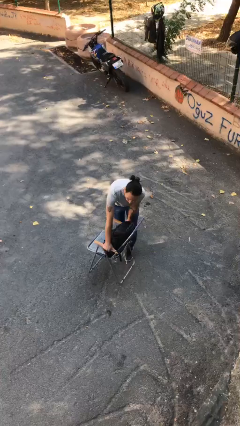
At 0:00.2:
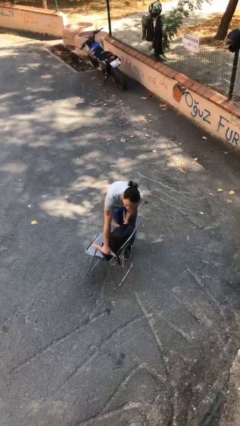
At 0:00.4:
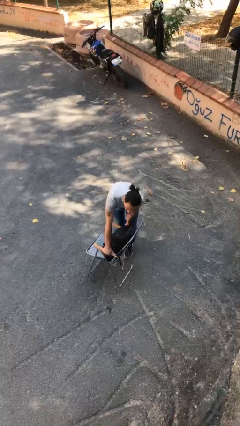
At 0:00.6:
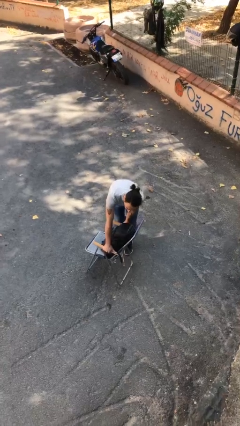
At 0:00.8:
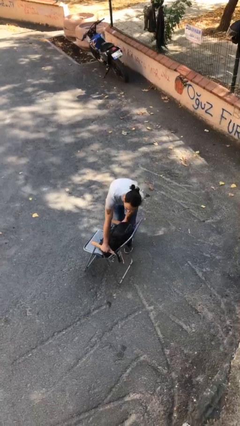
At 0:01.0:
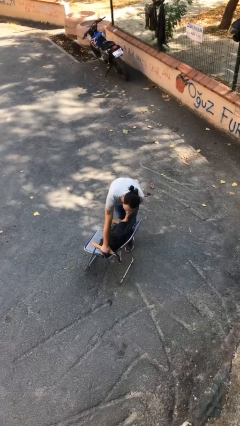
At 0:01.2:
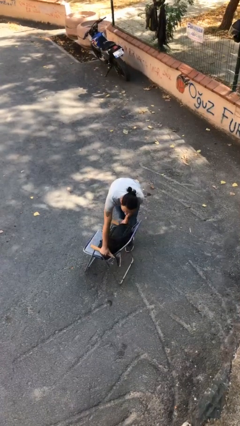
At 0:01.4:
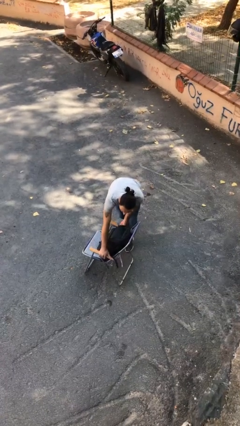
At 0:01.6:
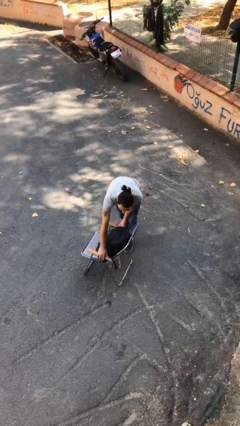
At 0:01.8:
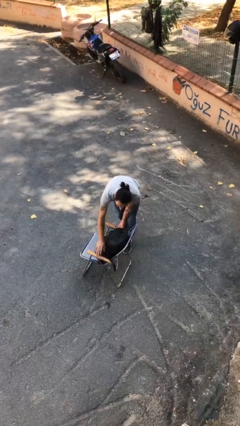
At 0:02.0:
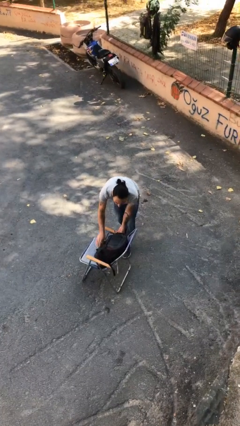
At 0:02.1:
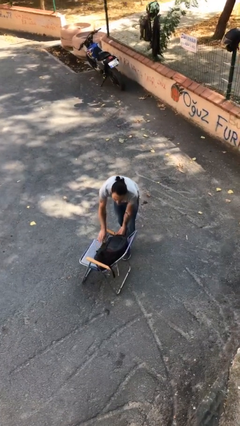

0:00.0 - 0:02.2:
person puts down object on floor

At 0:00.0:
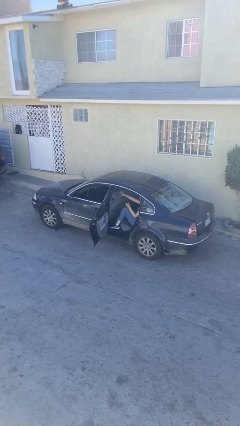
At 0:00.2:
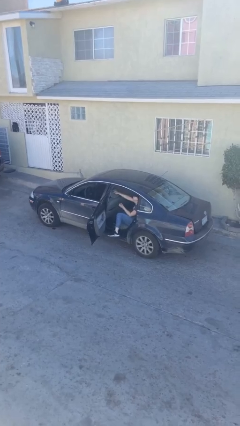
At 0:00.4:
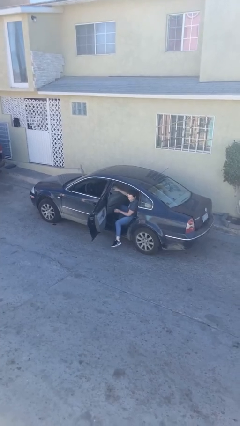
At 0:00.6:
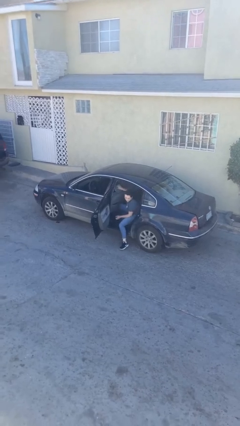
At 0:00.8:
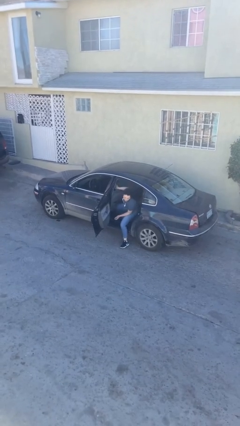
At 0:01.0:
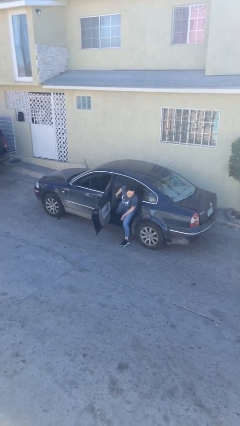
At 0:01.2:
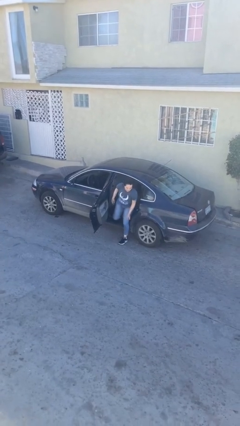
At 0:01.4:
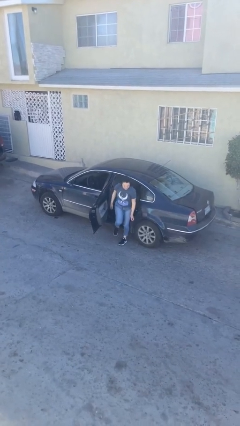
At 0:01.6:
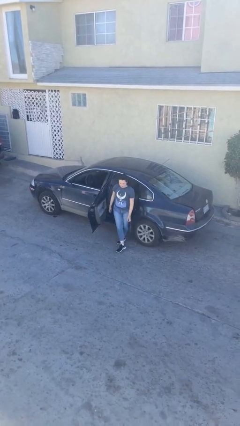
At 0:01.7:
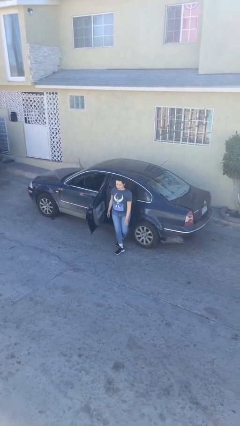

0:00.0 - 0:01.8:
person exits car

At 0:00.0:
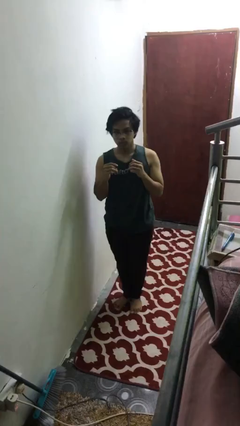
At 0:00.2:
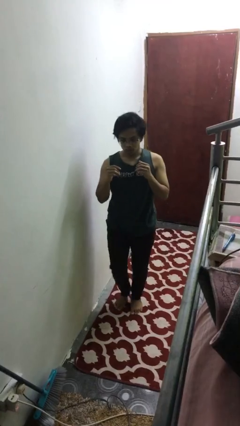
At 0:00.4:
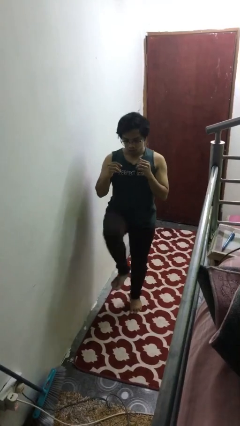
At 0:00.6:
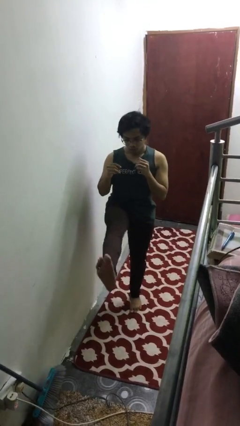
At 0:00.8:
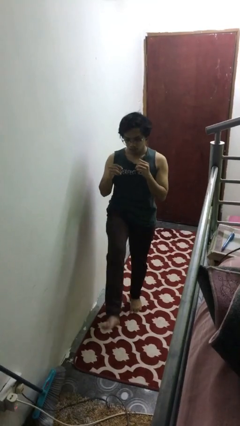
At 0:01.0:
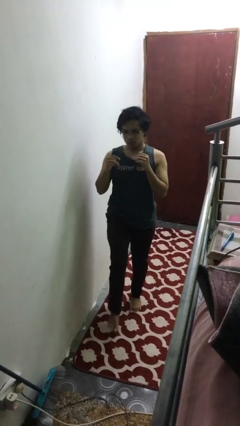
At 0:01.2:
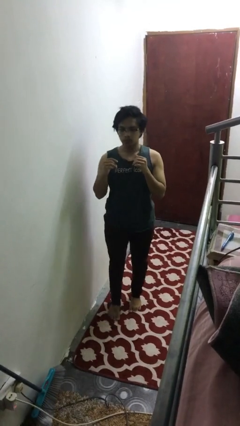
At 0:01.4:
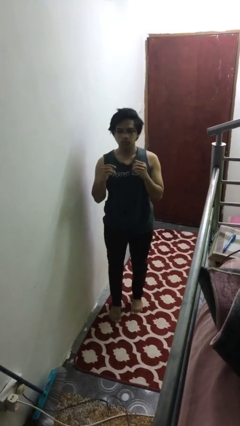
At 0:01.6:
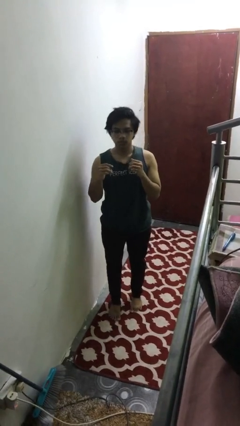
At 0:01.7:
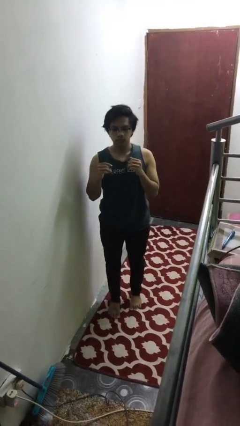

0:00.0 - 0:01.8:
person karate kicks

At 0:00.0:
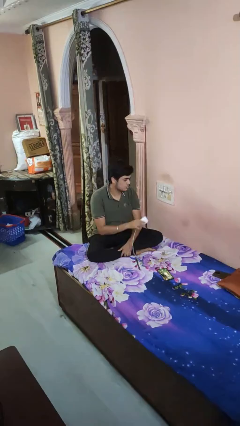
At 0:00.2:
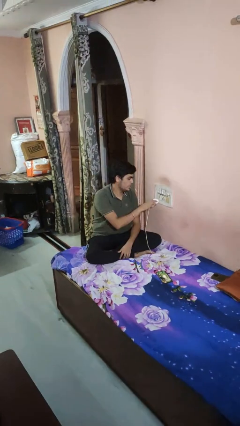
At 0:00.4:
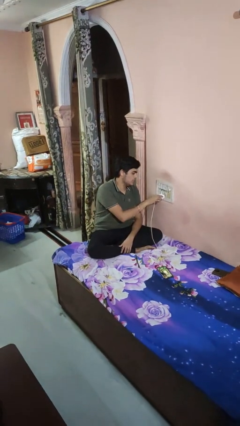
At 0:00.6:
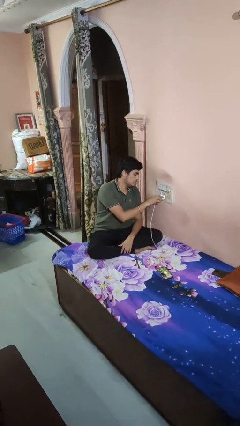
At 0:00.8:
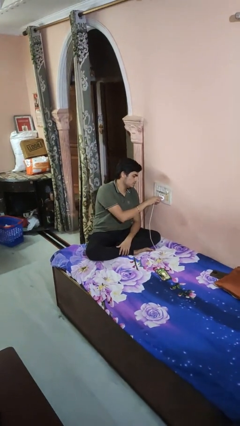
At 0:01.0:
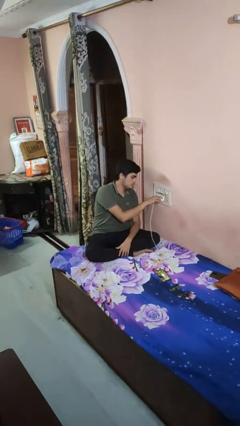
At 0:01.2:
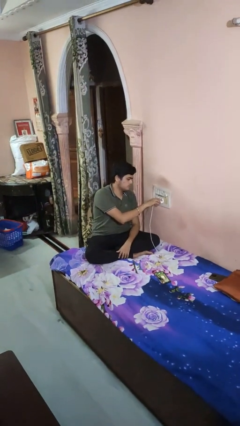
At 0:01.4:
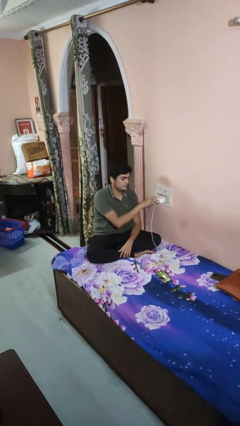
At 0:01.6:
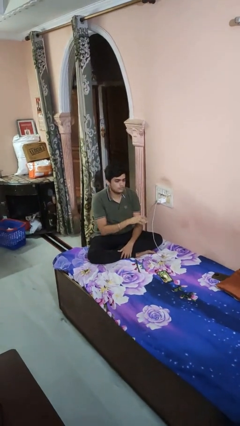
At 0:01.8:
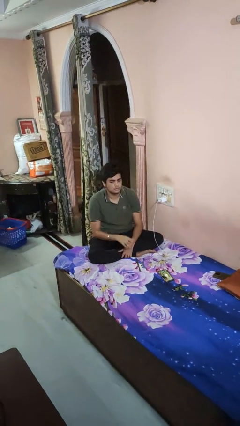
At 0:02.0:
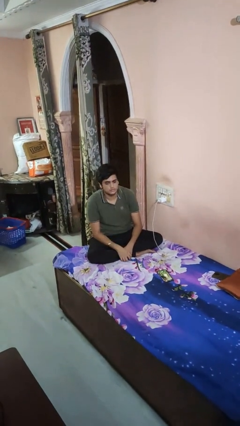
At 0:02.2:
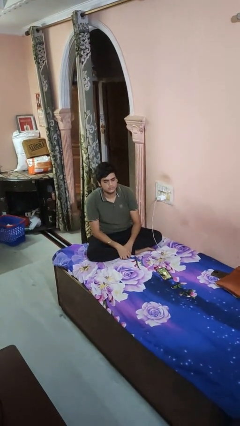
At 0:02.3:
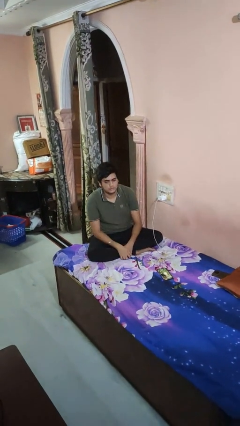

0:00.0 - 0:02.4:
person plugs into electrical socket

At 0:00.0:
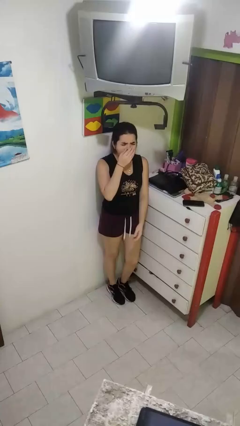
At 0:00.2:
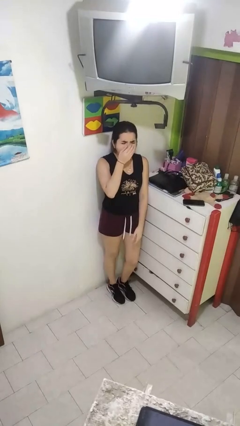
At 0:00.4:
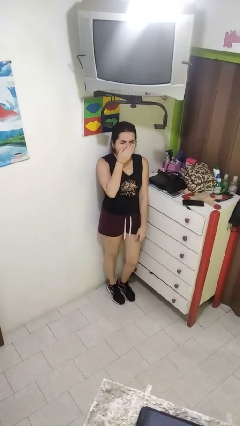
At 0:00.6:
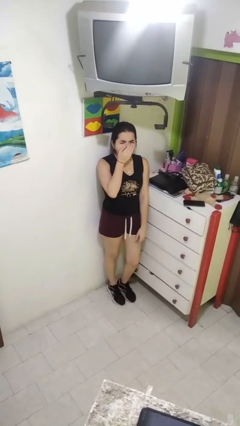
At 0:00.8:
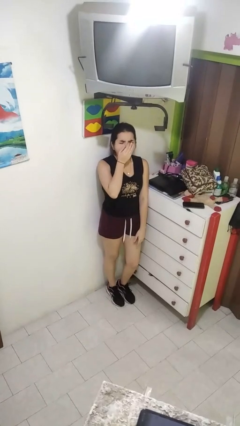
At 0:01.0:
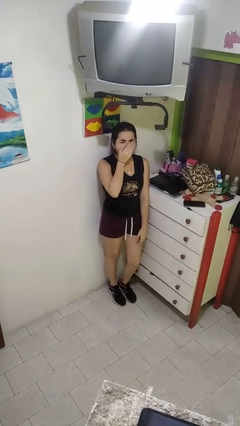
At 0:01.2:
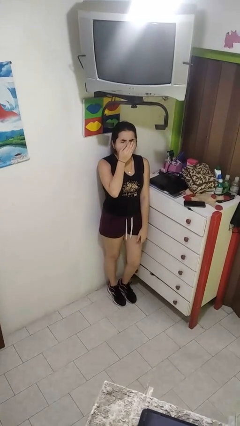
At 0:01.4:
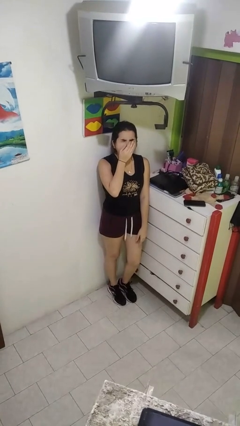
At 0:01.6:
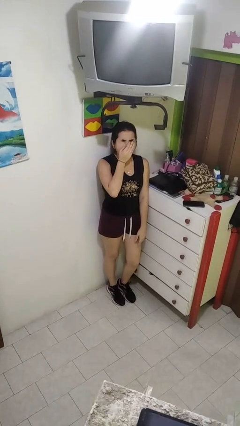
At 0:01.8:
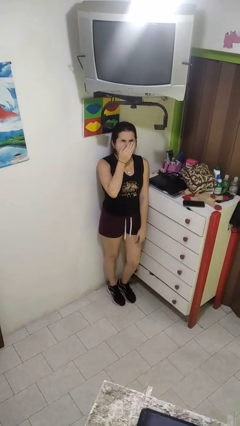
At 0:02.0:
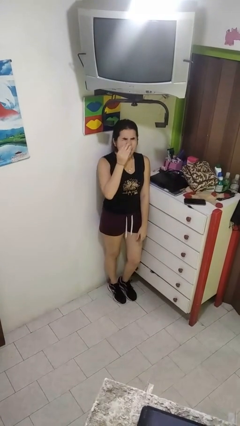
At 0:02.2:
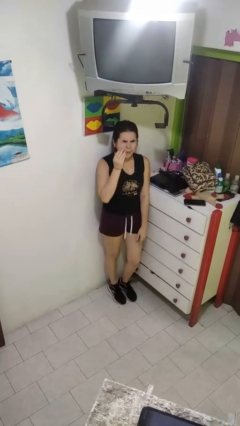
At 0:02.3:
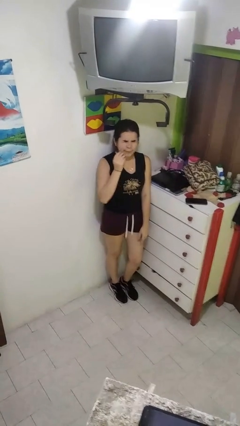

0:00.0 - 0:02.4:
person yawns

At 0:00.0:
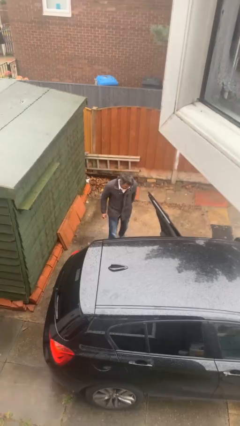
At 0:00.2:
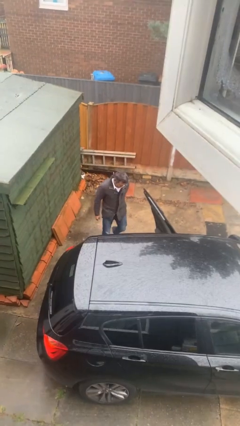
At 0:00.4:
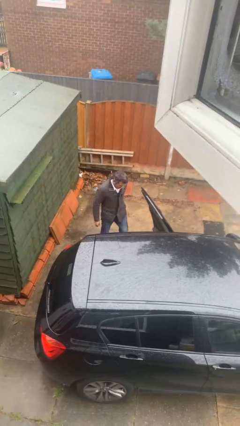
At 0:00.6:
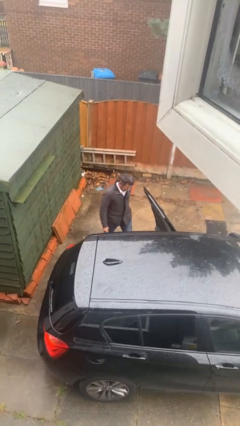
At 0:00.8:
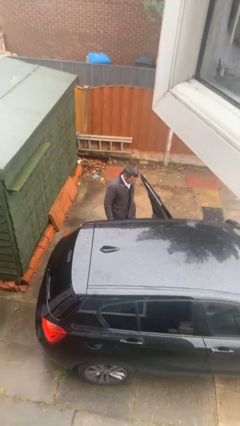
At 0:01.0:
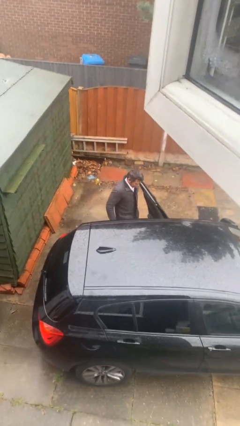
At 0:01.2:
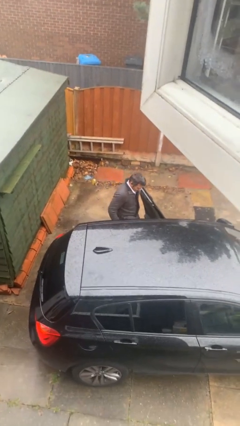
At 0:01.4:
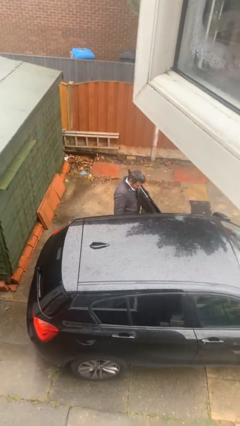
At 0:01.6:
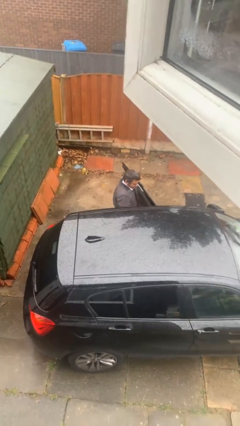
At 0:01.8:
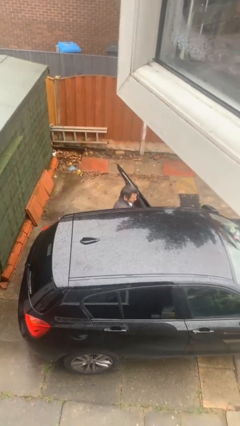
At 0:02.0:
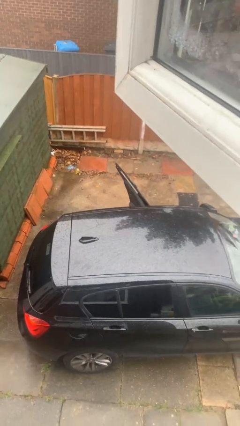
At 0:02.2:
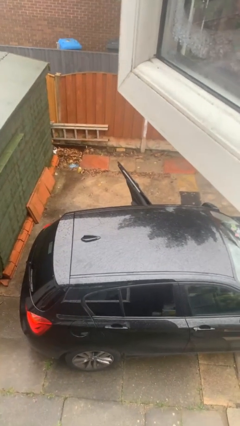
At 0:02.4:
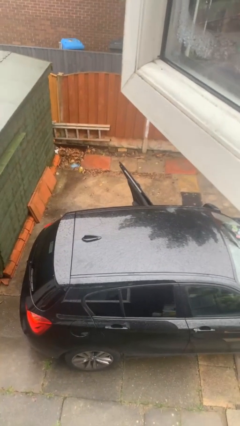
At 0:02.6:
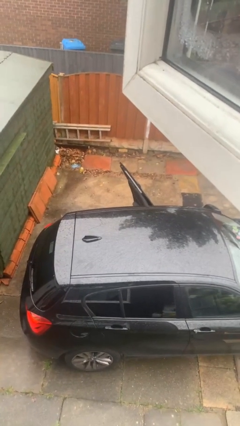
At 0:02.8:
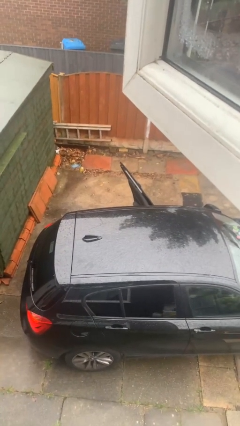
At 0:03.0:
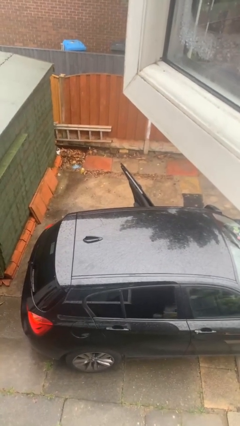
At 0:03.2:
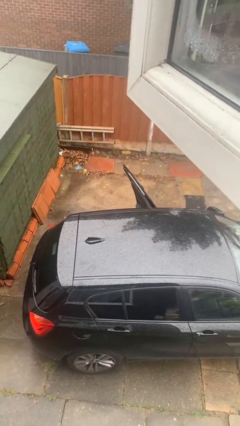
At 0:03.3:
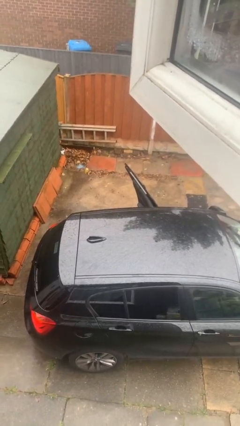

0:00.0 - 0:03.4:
person enters car

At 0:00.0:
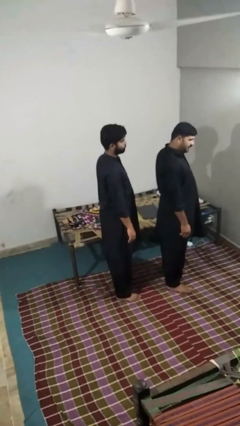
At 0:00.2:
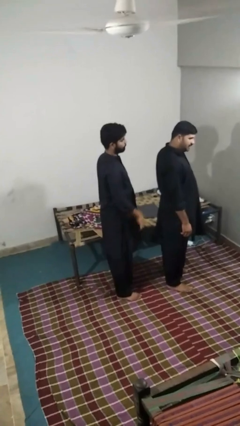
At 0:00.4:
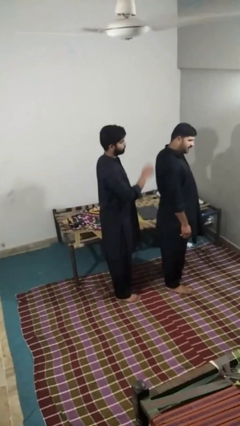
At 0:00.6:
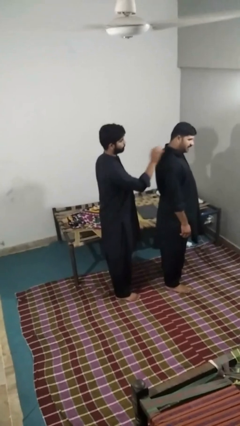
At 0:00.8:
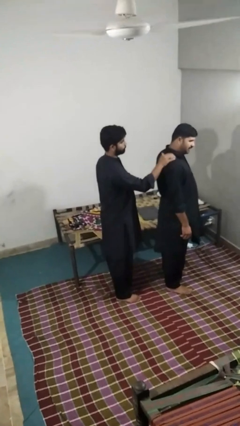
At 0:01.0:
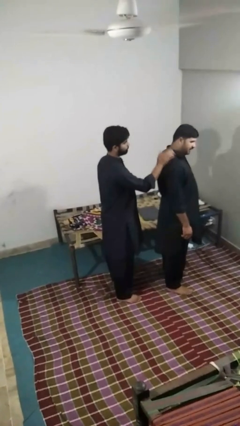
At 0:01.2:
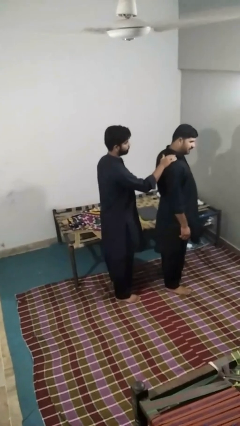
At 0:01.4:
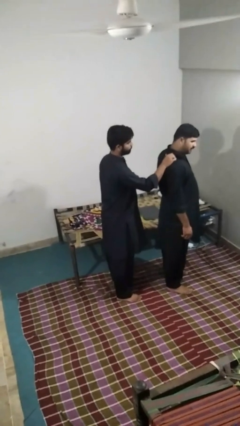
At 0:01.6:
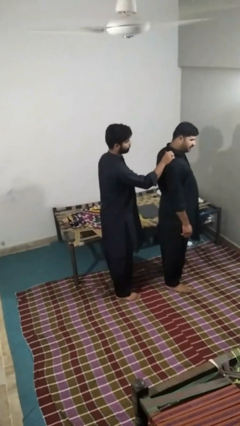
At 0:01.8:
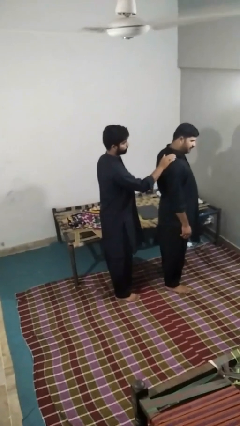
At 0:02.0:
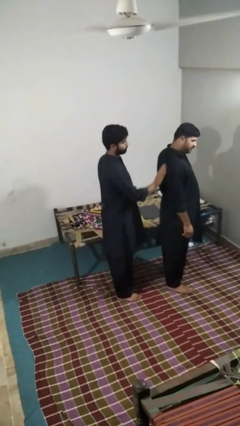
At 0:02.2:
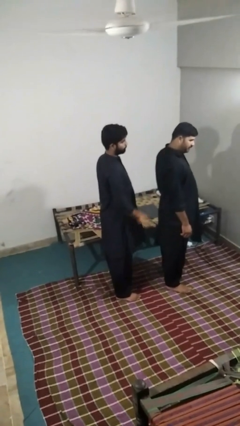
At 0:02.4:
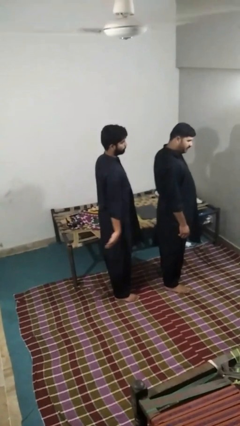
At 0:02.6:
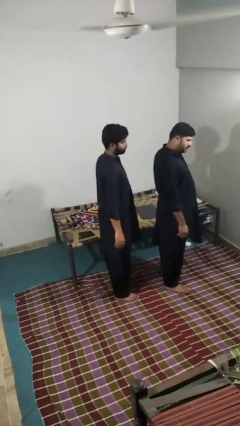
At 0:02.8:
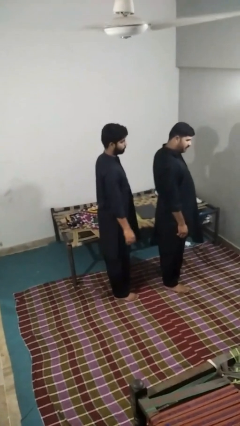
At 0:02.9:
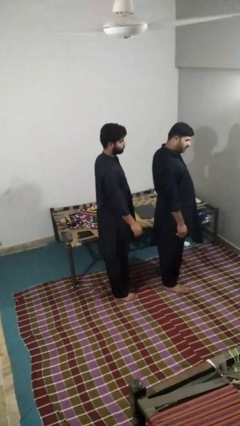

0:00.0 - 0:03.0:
person touches back of person
